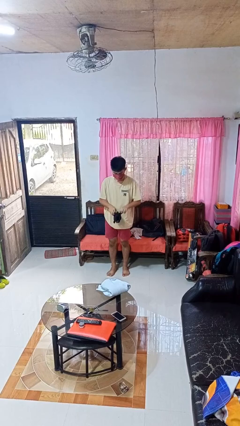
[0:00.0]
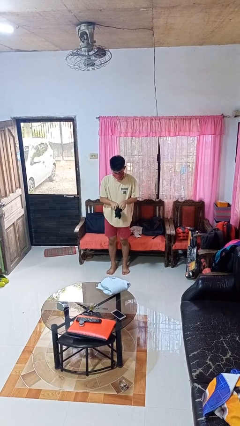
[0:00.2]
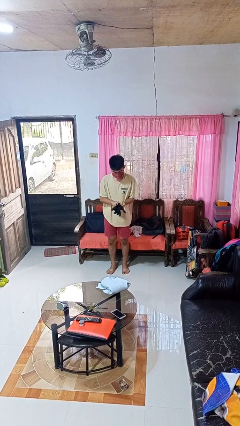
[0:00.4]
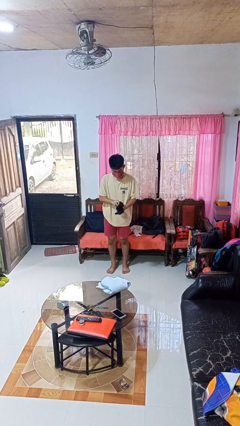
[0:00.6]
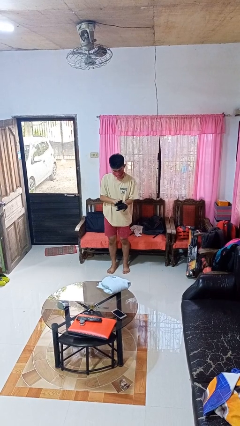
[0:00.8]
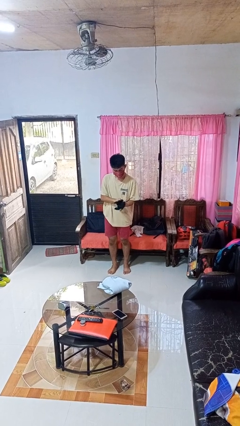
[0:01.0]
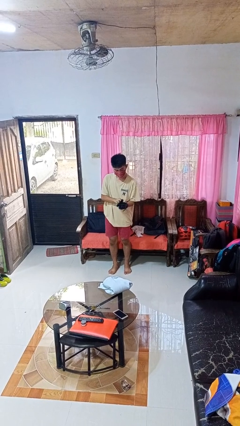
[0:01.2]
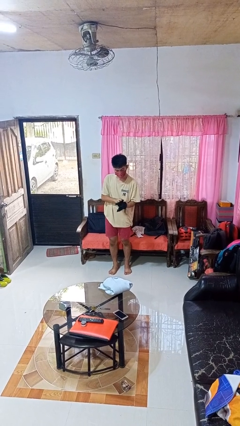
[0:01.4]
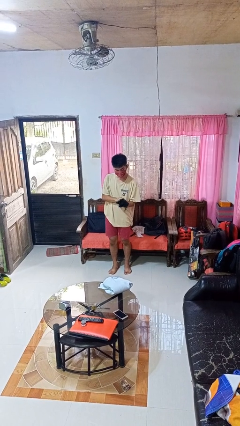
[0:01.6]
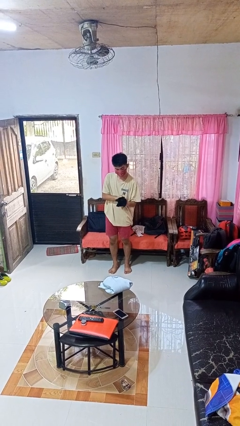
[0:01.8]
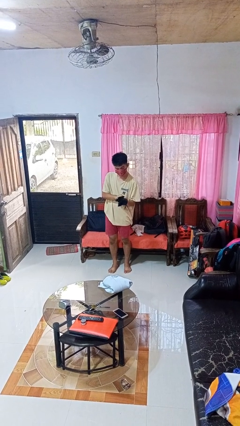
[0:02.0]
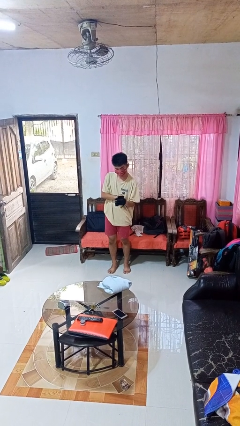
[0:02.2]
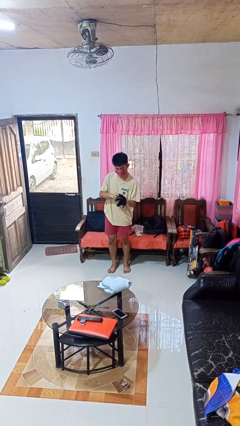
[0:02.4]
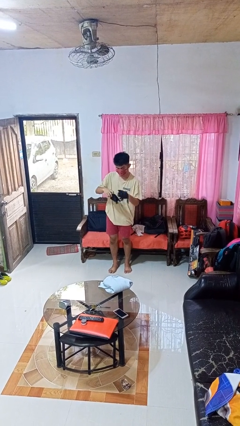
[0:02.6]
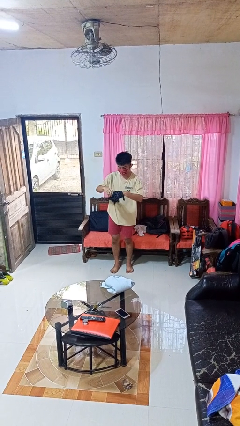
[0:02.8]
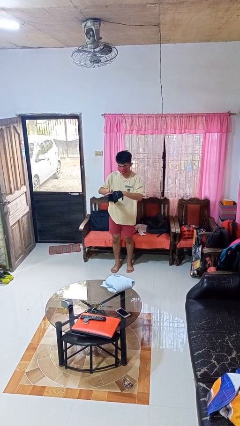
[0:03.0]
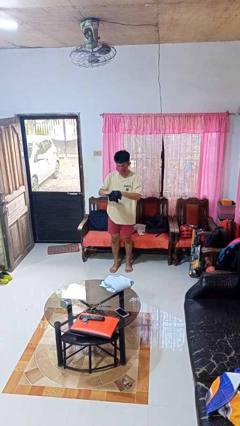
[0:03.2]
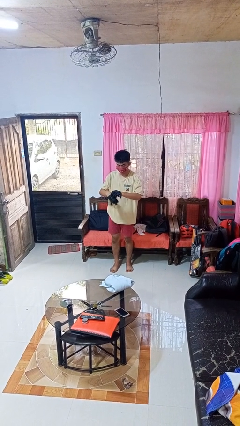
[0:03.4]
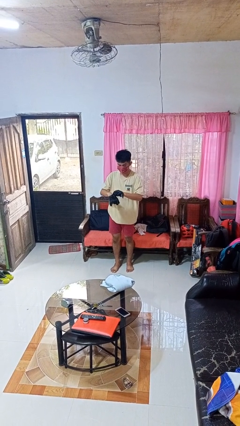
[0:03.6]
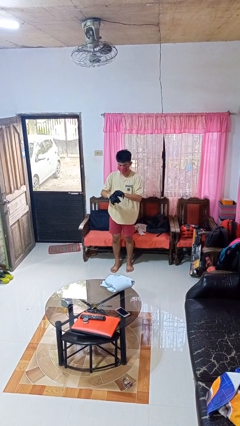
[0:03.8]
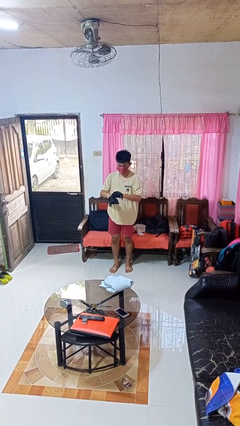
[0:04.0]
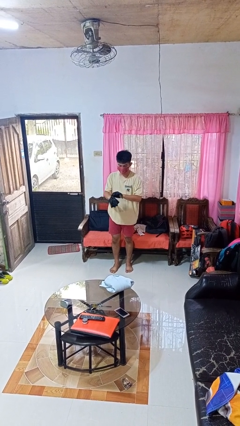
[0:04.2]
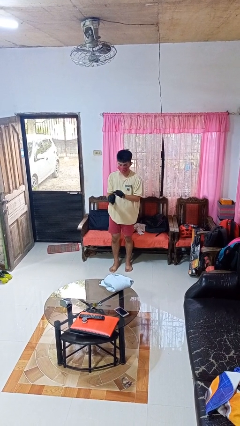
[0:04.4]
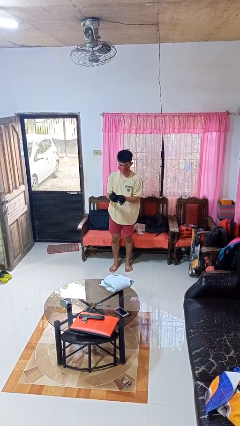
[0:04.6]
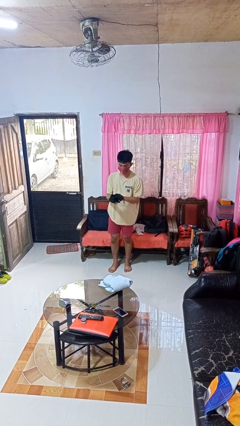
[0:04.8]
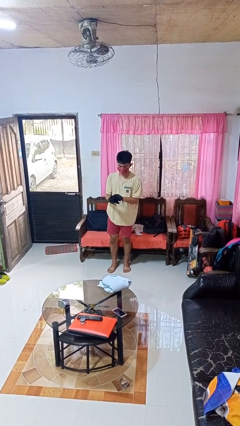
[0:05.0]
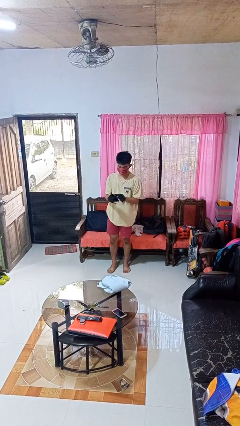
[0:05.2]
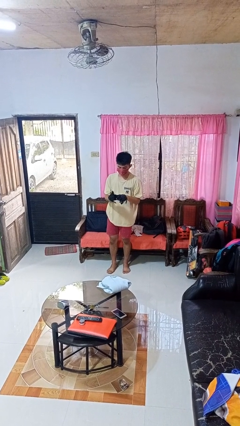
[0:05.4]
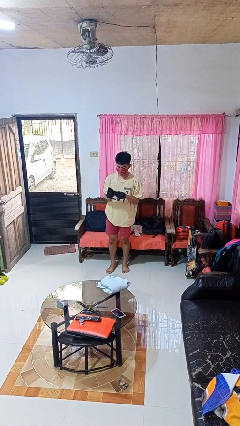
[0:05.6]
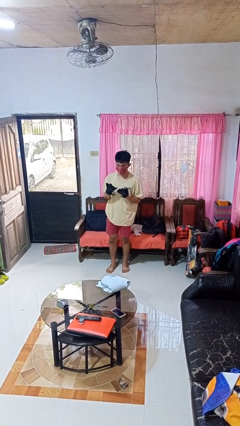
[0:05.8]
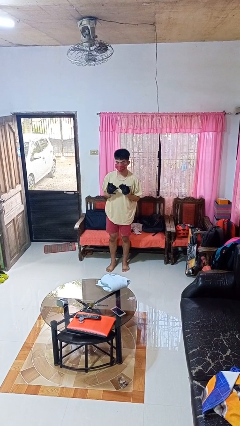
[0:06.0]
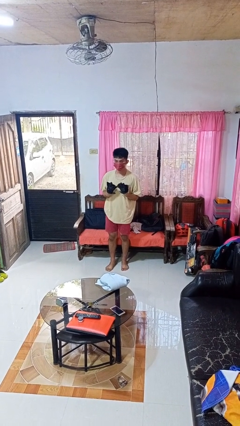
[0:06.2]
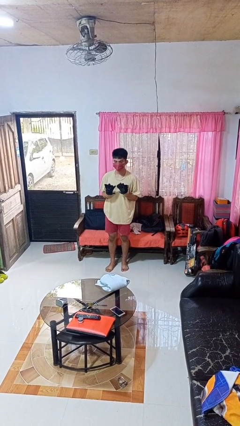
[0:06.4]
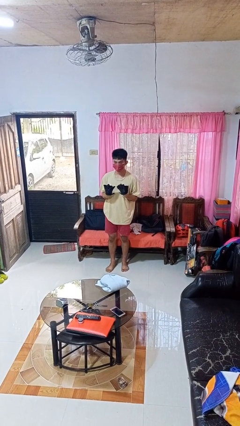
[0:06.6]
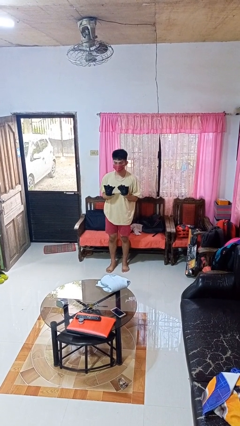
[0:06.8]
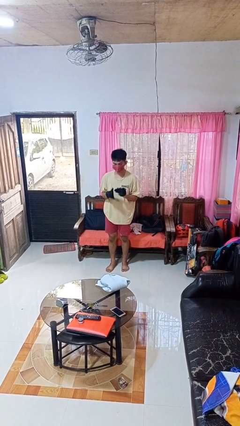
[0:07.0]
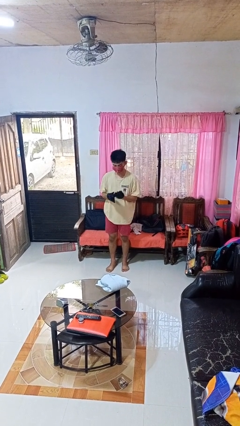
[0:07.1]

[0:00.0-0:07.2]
person puts on gloves

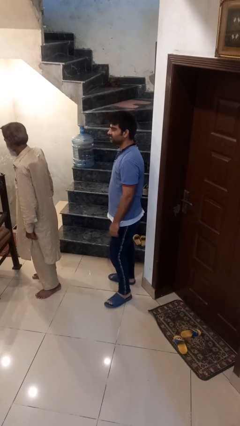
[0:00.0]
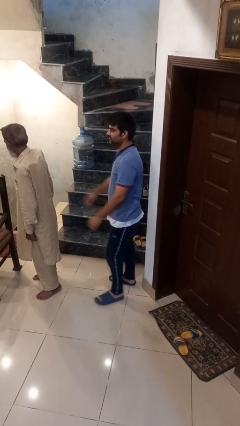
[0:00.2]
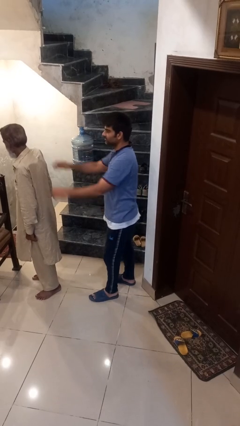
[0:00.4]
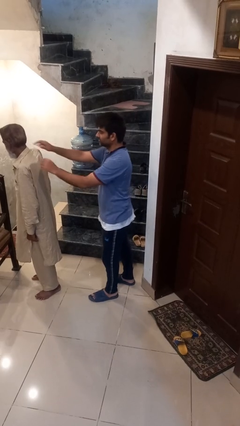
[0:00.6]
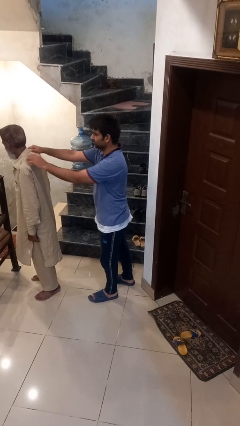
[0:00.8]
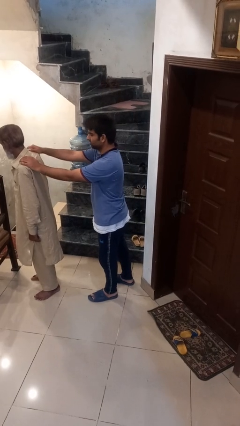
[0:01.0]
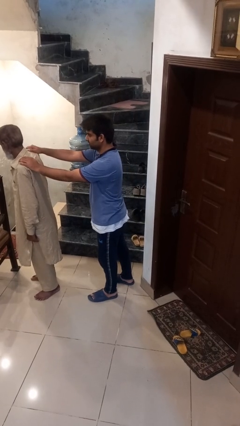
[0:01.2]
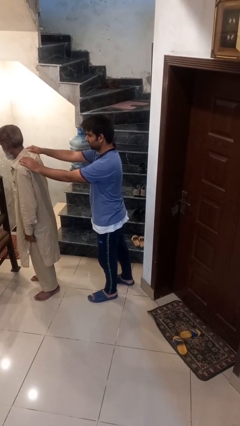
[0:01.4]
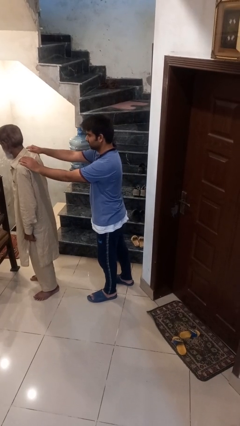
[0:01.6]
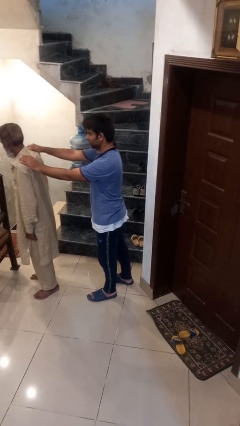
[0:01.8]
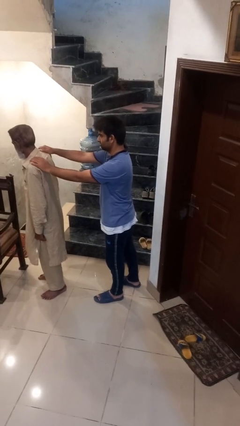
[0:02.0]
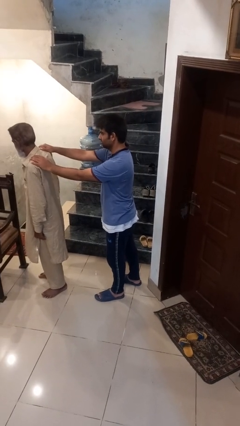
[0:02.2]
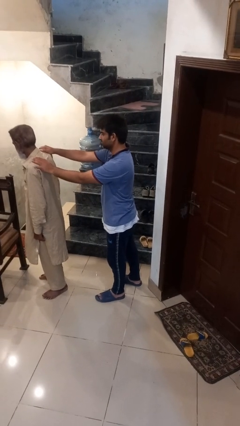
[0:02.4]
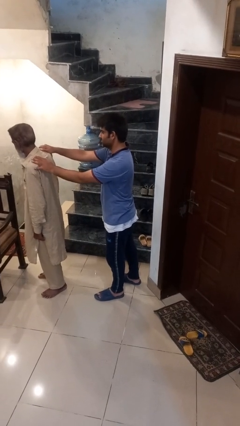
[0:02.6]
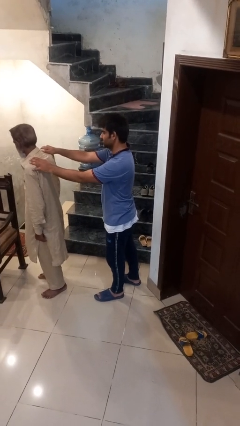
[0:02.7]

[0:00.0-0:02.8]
person grabs person by shoulder

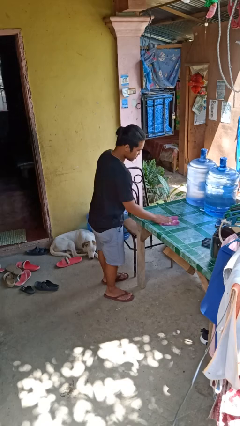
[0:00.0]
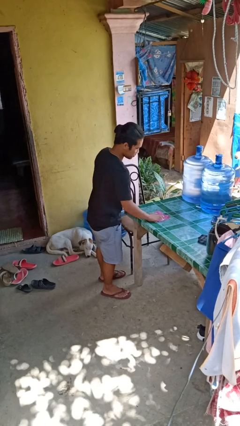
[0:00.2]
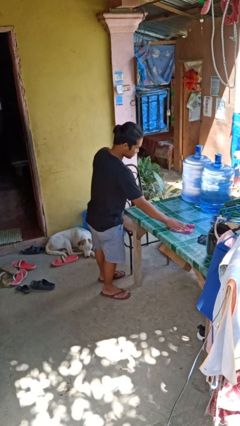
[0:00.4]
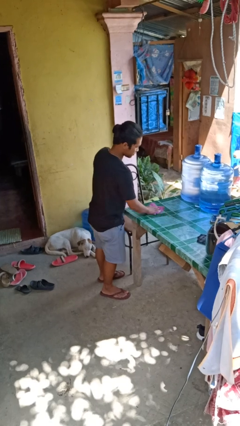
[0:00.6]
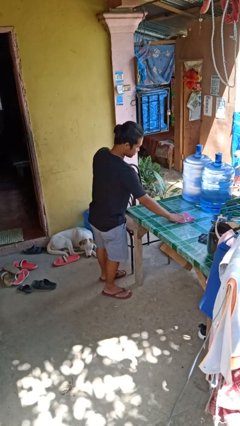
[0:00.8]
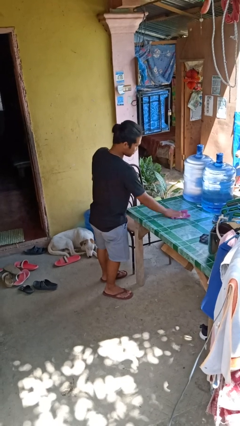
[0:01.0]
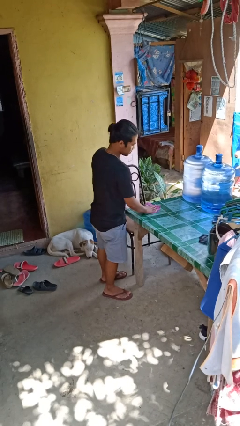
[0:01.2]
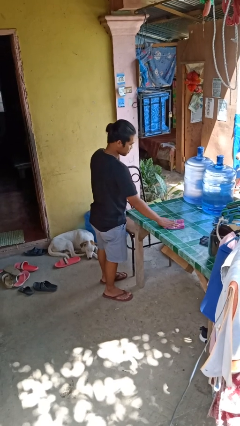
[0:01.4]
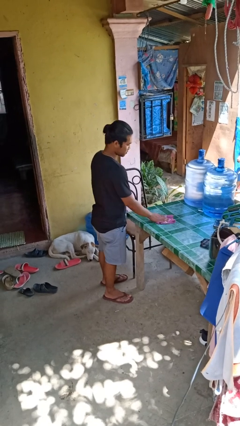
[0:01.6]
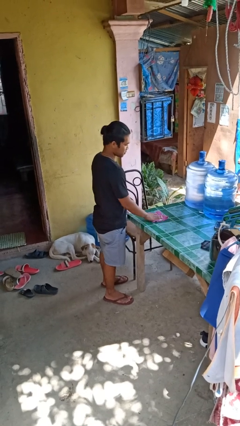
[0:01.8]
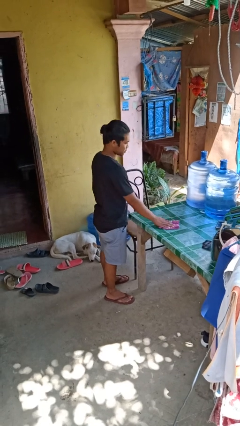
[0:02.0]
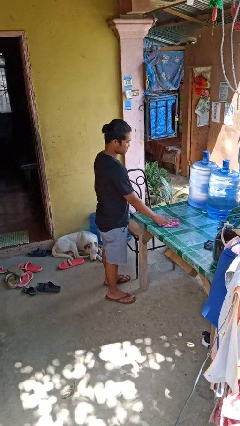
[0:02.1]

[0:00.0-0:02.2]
person cleans table with rag

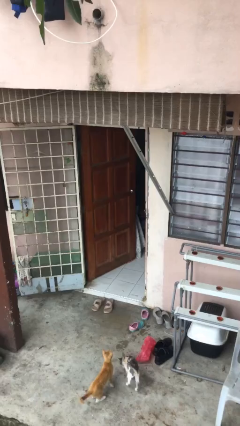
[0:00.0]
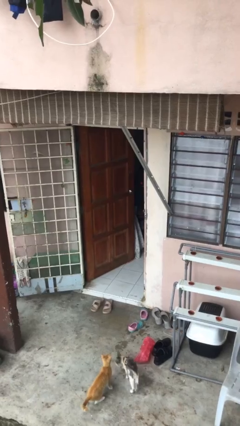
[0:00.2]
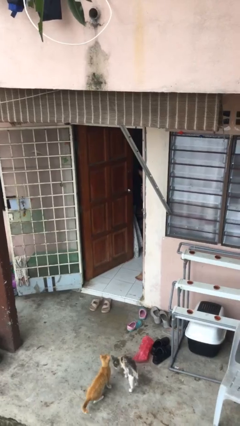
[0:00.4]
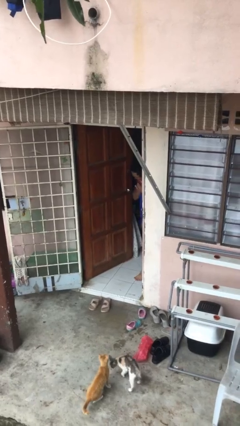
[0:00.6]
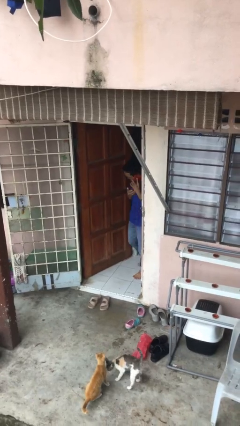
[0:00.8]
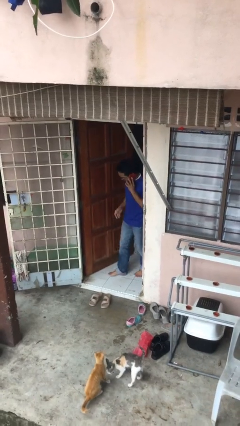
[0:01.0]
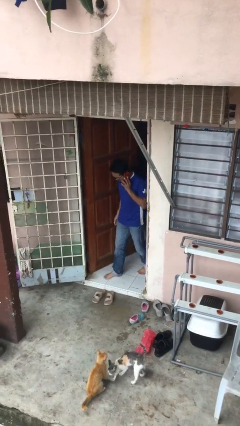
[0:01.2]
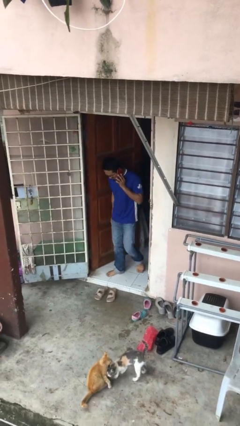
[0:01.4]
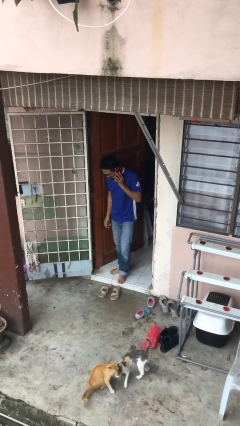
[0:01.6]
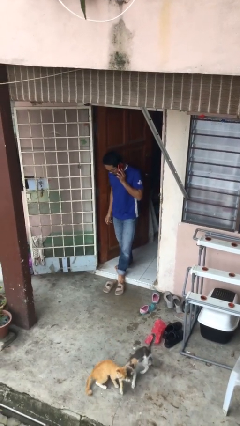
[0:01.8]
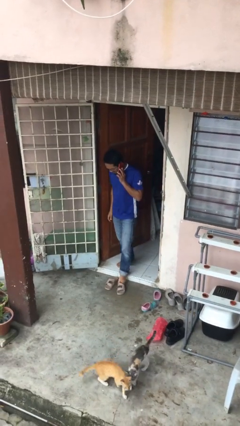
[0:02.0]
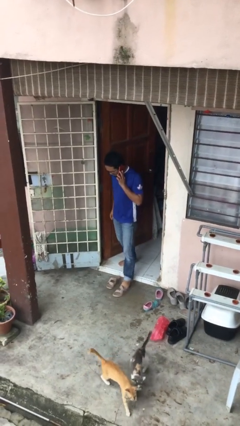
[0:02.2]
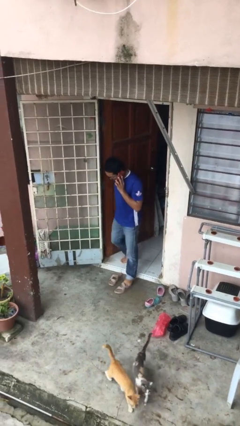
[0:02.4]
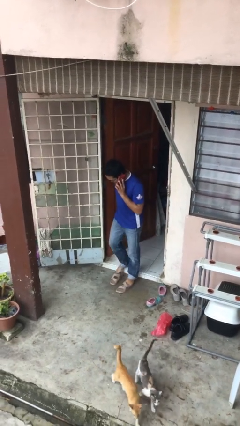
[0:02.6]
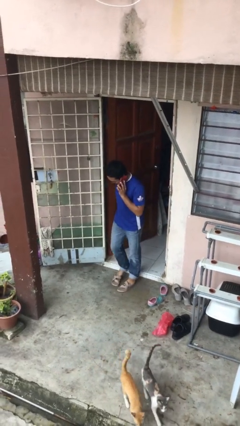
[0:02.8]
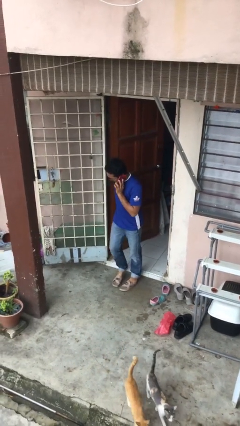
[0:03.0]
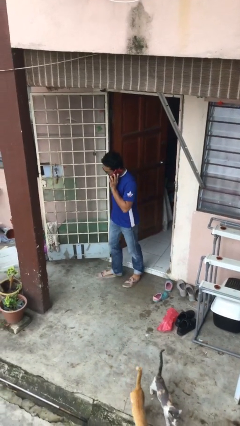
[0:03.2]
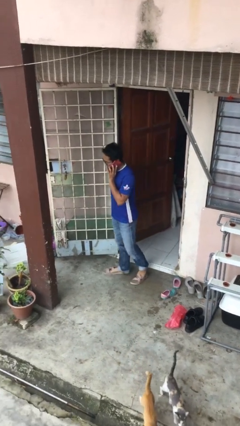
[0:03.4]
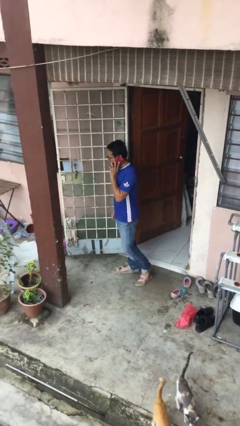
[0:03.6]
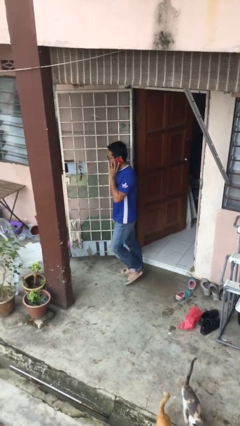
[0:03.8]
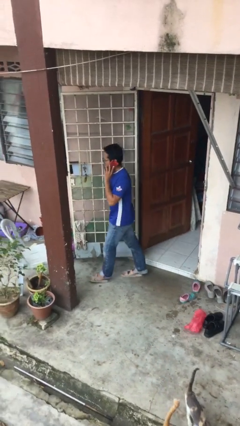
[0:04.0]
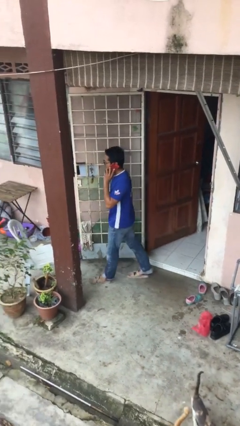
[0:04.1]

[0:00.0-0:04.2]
person enters scene through structure

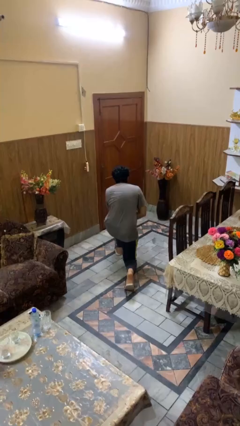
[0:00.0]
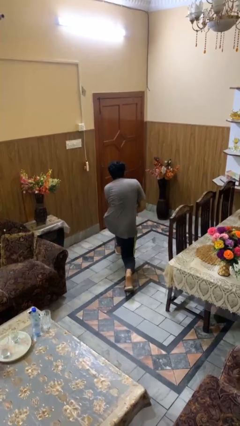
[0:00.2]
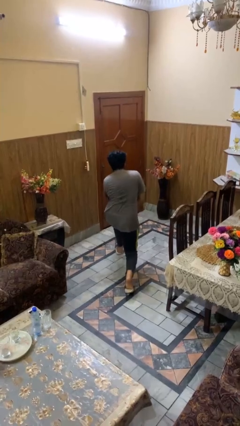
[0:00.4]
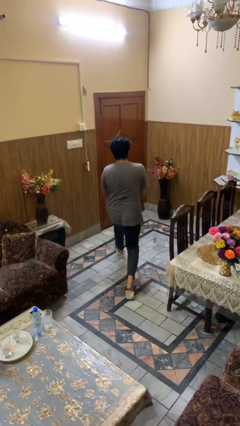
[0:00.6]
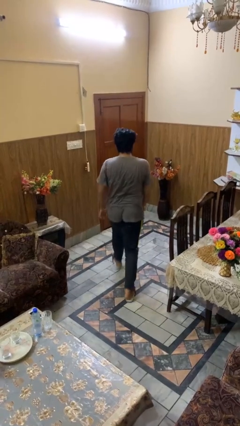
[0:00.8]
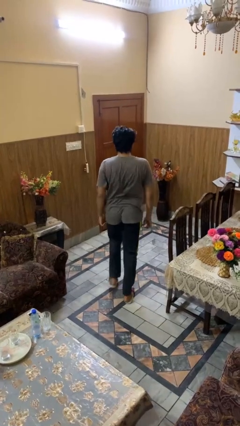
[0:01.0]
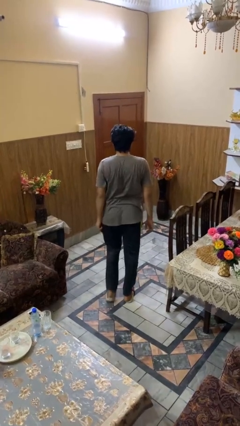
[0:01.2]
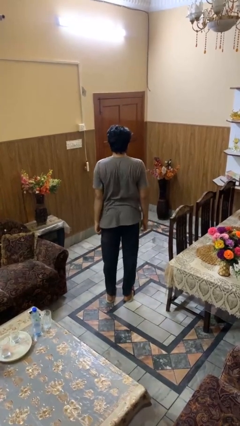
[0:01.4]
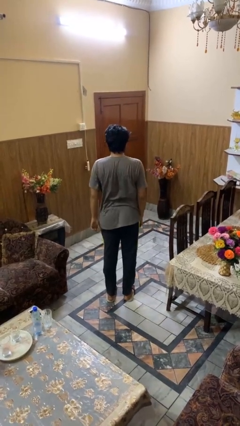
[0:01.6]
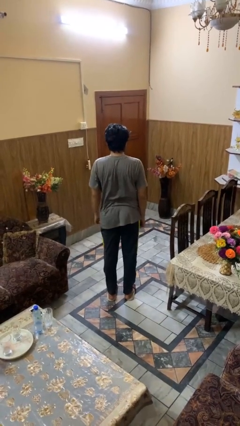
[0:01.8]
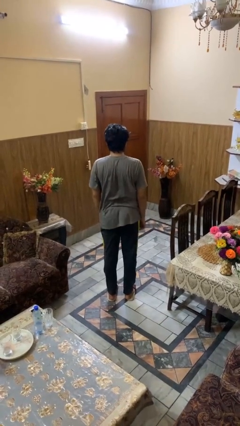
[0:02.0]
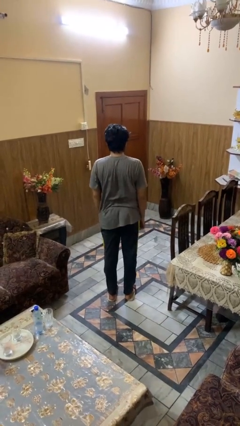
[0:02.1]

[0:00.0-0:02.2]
person stands up from floor
